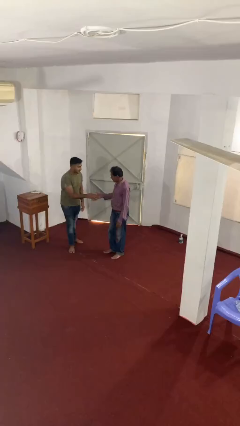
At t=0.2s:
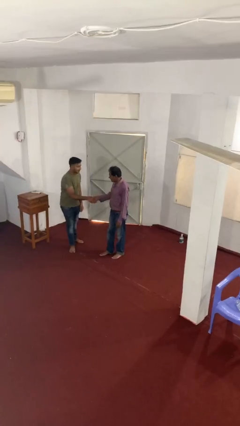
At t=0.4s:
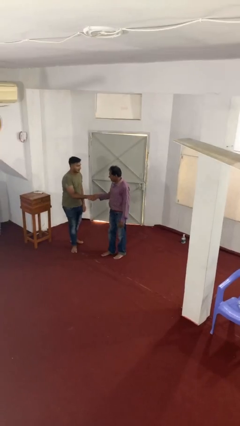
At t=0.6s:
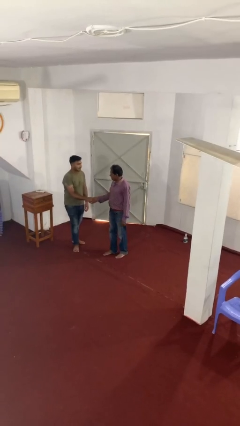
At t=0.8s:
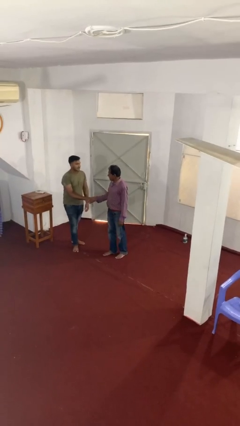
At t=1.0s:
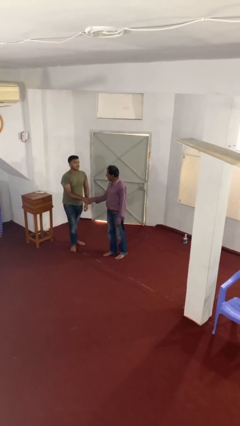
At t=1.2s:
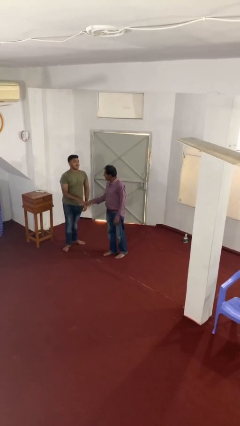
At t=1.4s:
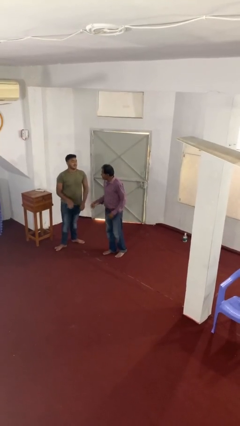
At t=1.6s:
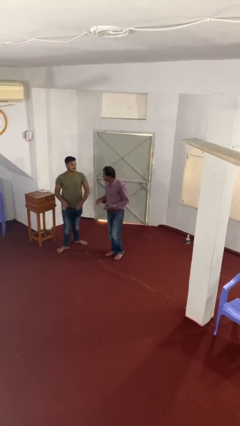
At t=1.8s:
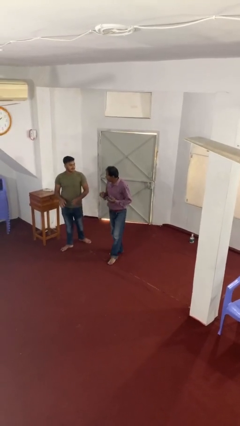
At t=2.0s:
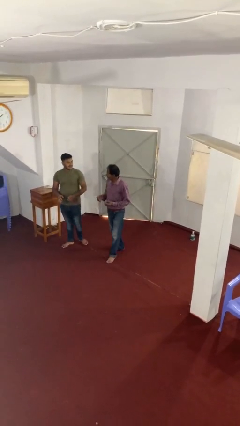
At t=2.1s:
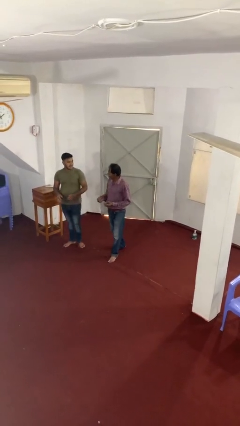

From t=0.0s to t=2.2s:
person shakes hand

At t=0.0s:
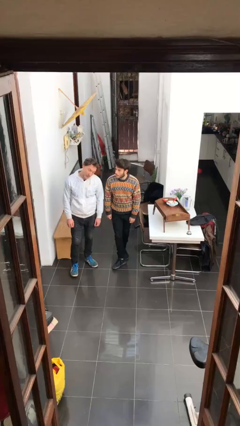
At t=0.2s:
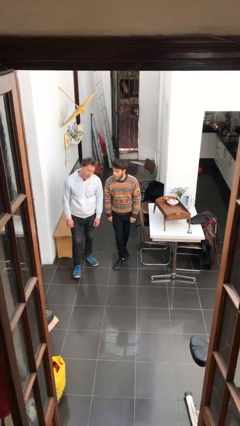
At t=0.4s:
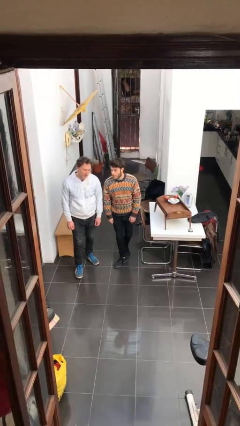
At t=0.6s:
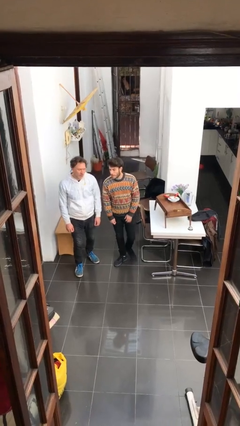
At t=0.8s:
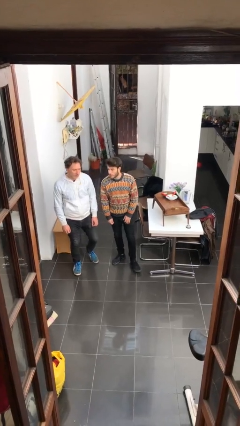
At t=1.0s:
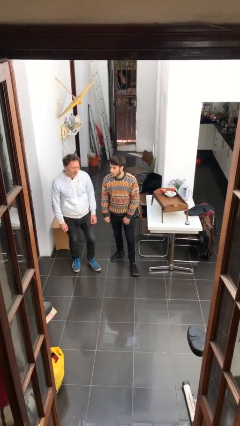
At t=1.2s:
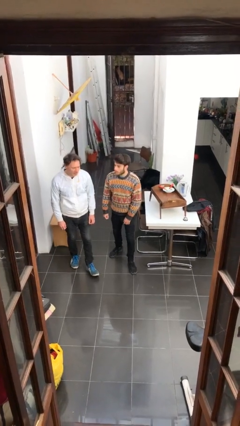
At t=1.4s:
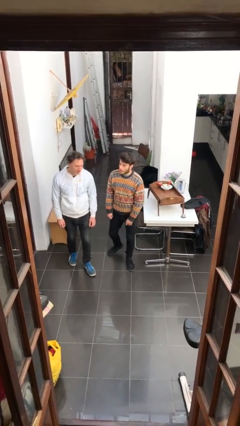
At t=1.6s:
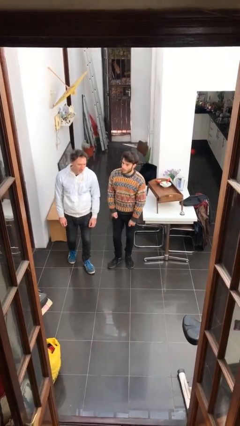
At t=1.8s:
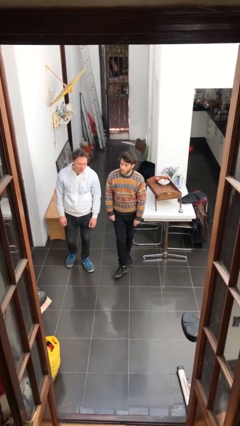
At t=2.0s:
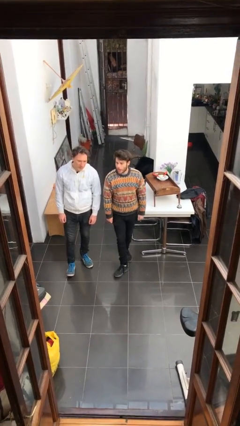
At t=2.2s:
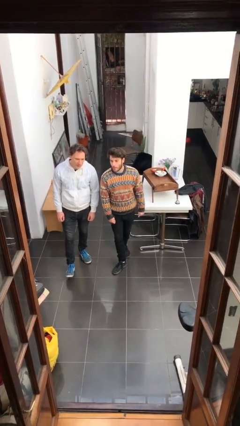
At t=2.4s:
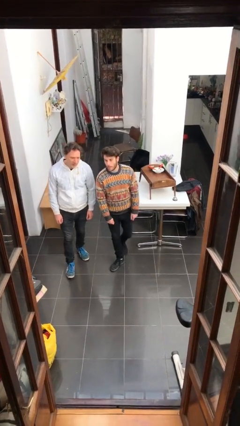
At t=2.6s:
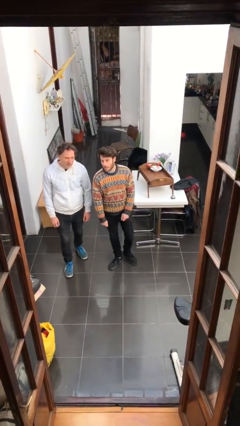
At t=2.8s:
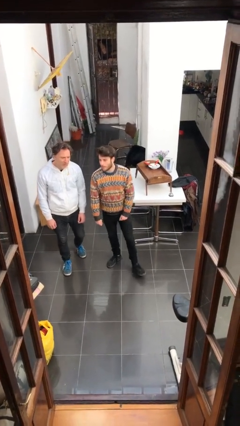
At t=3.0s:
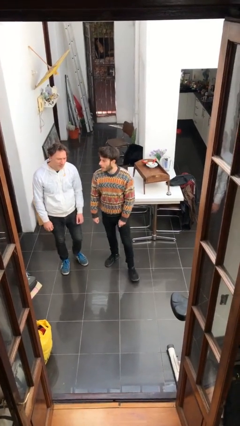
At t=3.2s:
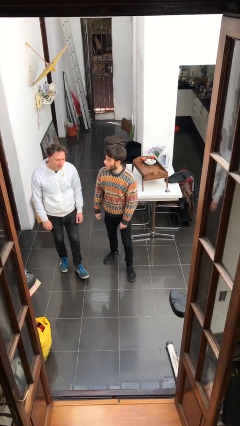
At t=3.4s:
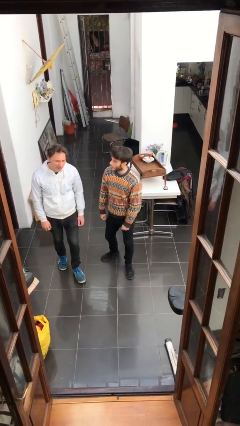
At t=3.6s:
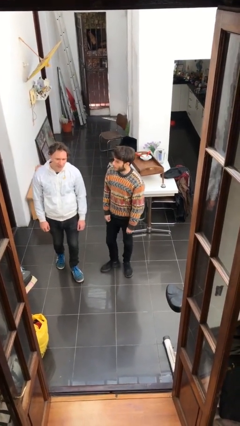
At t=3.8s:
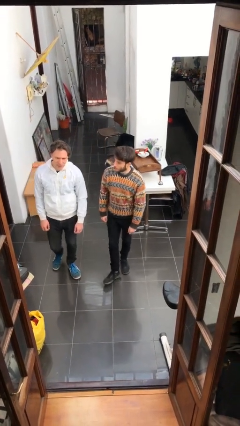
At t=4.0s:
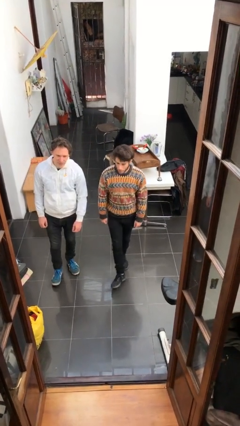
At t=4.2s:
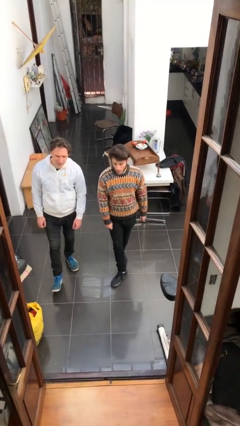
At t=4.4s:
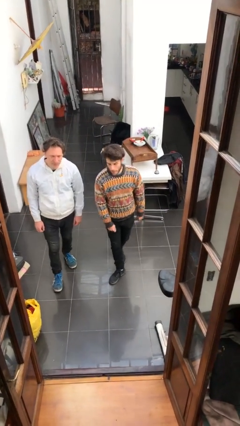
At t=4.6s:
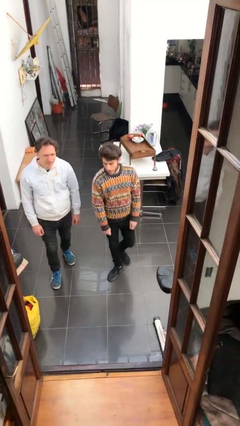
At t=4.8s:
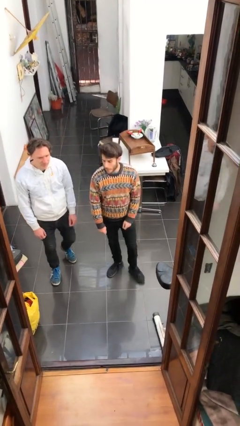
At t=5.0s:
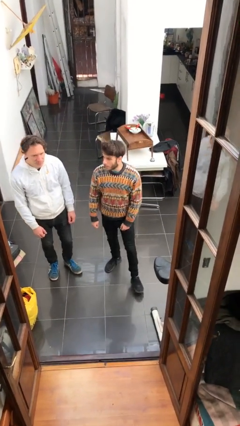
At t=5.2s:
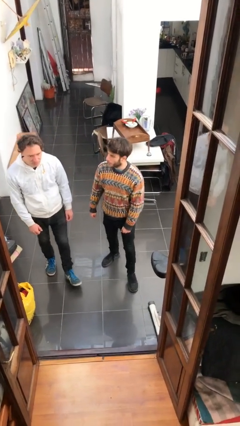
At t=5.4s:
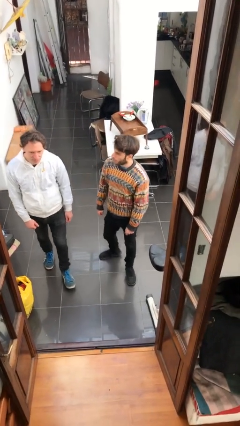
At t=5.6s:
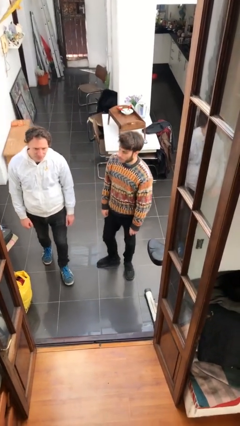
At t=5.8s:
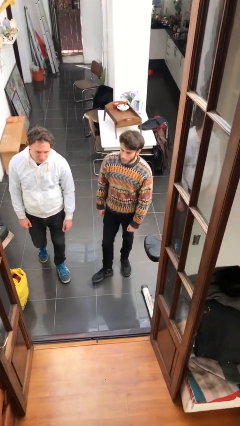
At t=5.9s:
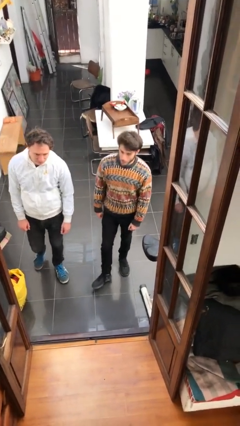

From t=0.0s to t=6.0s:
person talks to person

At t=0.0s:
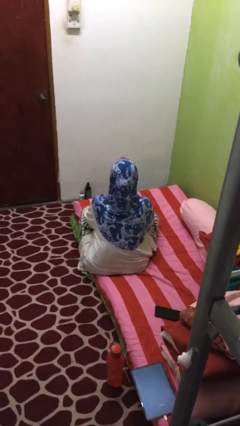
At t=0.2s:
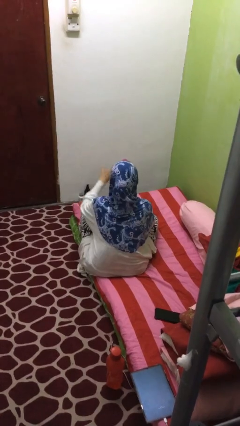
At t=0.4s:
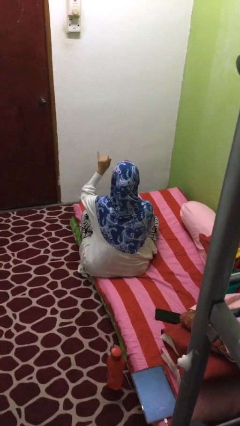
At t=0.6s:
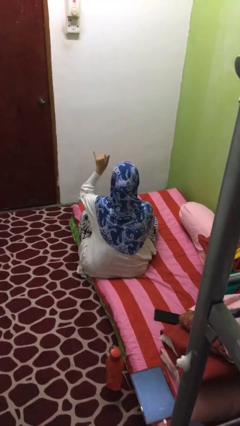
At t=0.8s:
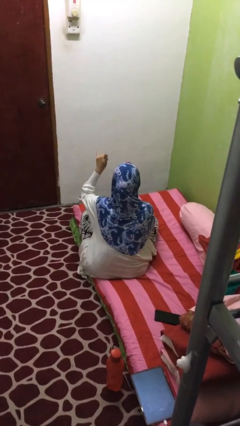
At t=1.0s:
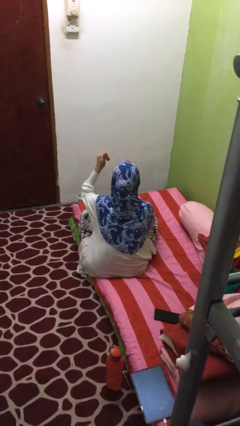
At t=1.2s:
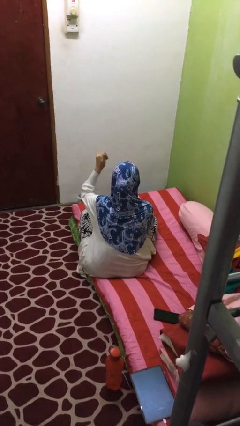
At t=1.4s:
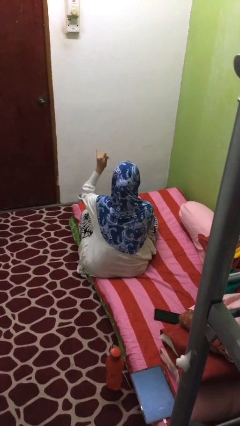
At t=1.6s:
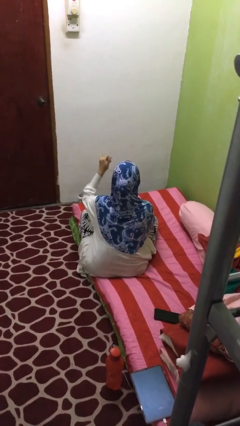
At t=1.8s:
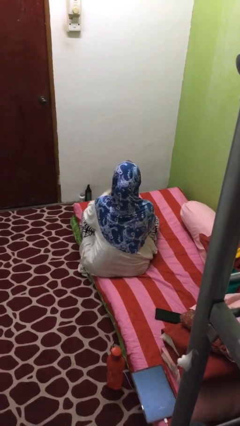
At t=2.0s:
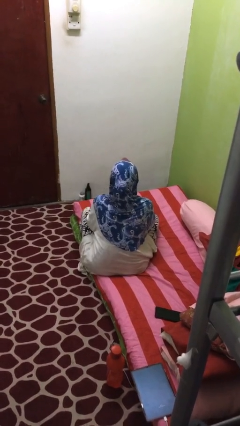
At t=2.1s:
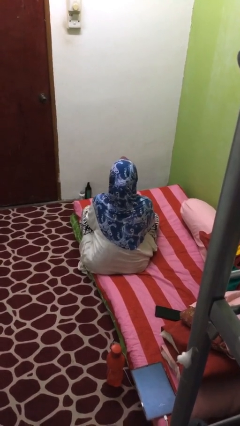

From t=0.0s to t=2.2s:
person gestures hang loose

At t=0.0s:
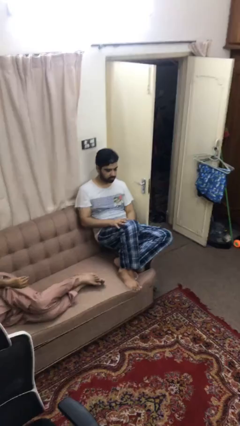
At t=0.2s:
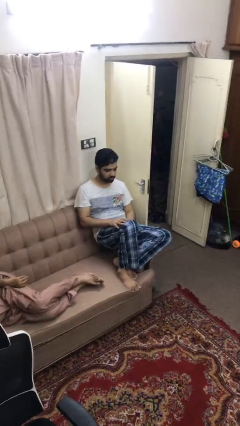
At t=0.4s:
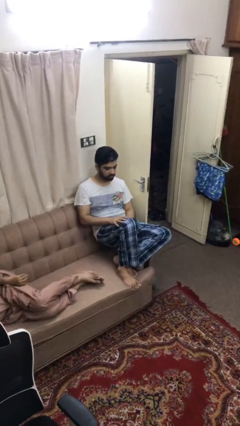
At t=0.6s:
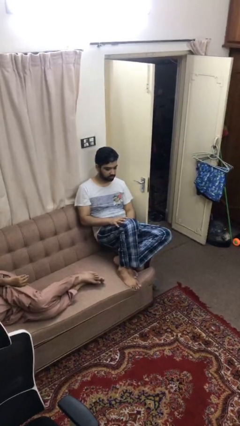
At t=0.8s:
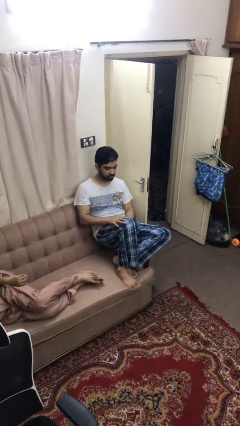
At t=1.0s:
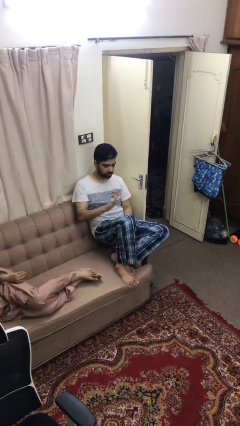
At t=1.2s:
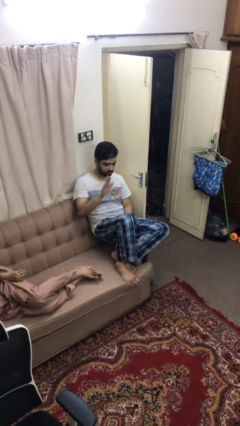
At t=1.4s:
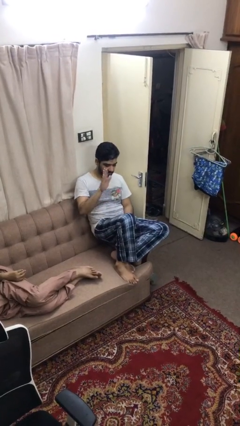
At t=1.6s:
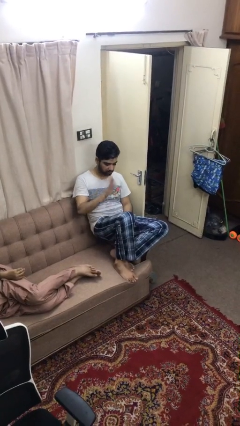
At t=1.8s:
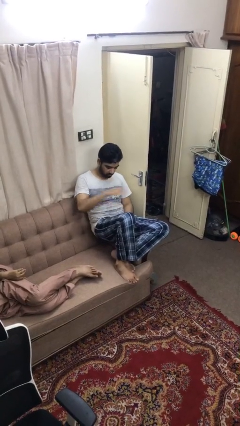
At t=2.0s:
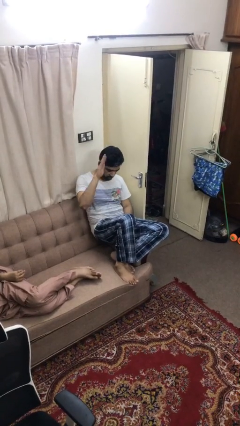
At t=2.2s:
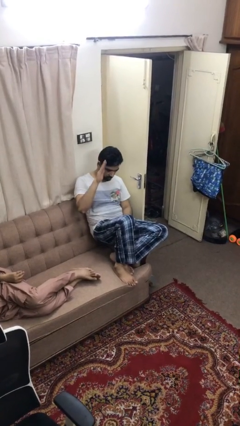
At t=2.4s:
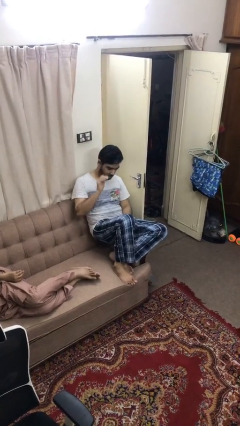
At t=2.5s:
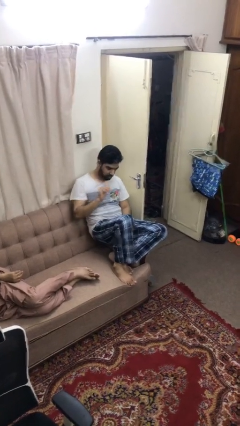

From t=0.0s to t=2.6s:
person swats bug

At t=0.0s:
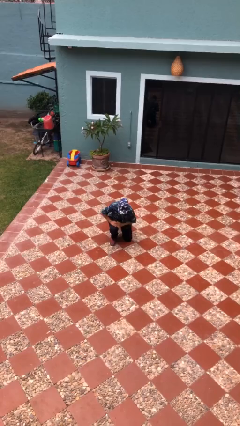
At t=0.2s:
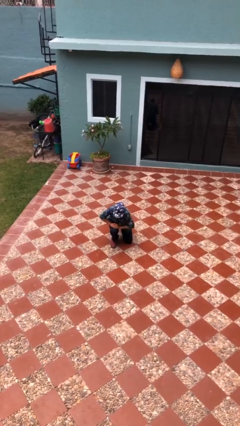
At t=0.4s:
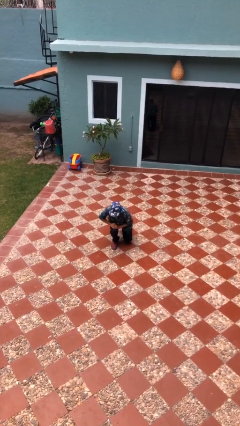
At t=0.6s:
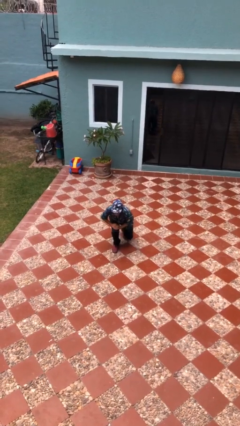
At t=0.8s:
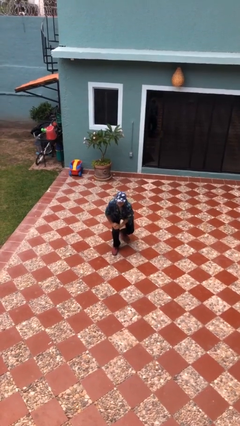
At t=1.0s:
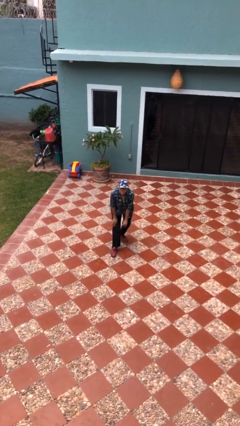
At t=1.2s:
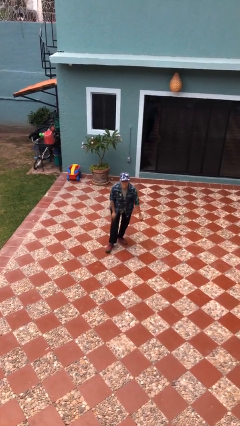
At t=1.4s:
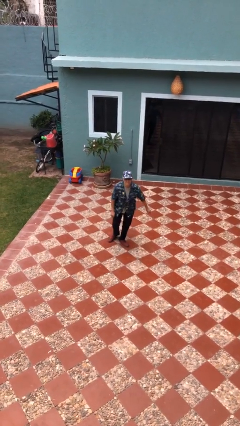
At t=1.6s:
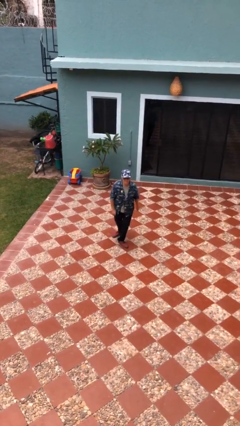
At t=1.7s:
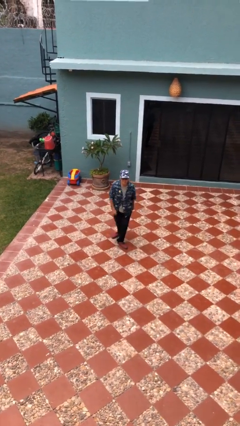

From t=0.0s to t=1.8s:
person stands up from floor

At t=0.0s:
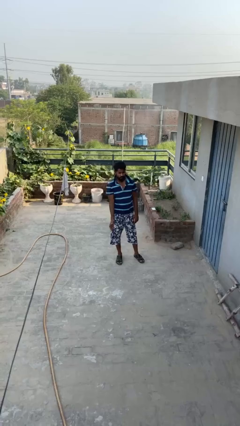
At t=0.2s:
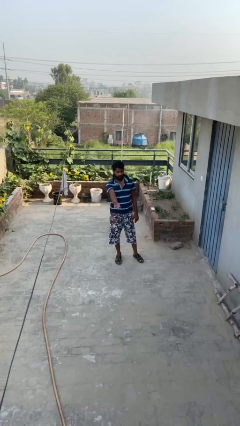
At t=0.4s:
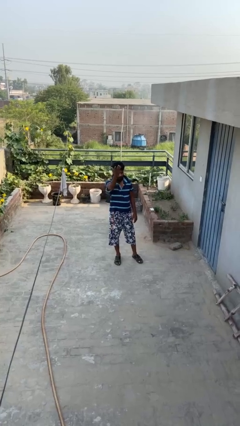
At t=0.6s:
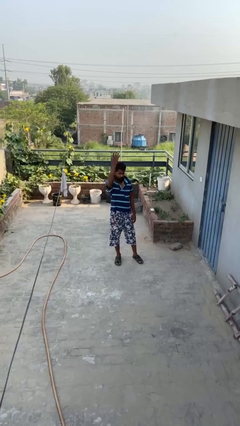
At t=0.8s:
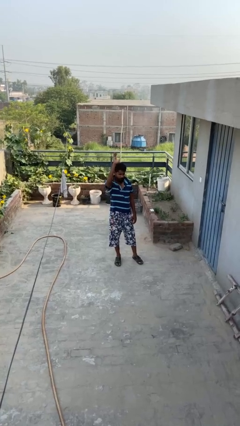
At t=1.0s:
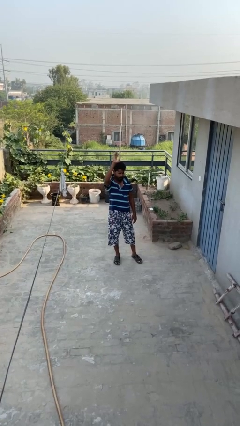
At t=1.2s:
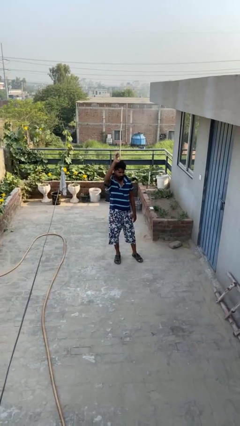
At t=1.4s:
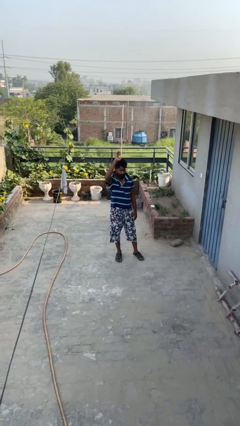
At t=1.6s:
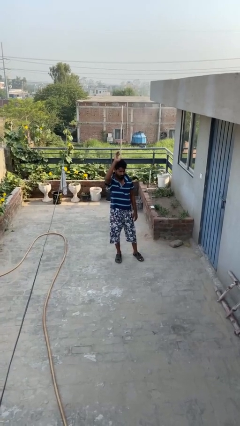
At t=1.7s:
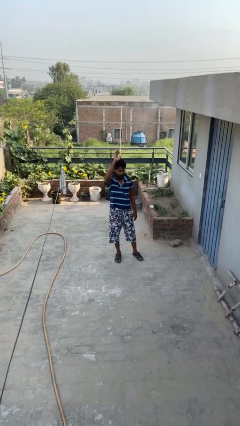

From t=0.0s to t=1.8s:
person gestures swipe up

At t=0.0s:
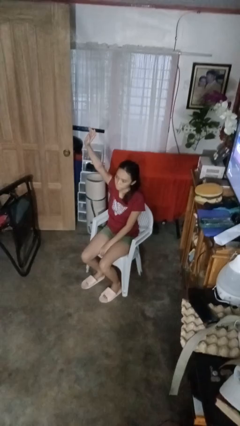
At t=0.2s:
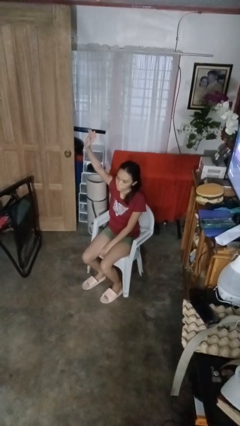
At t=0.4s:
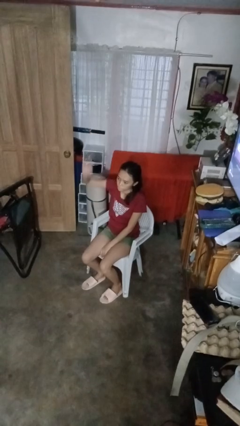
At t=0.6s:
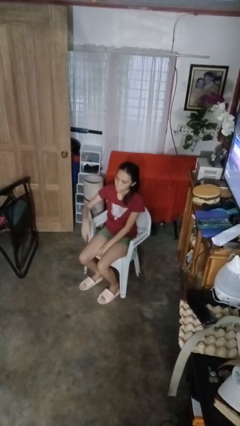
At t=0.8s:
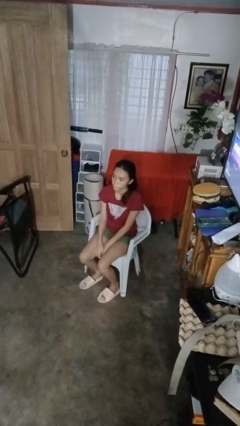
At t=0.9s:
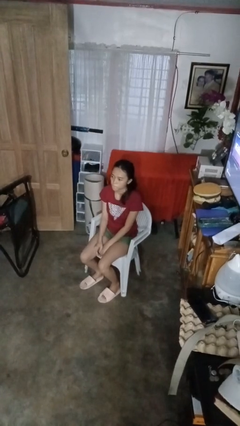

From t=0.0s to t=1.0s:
person gestures lower hand
